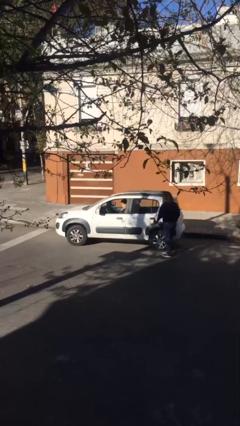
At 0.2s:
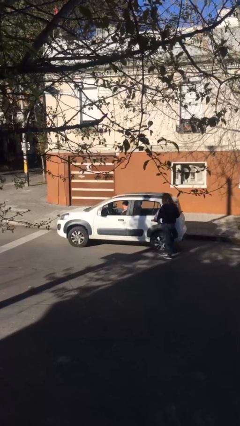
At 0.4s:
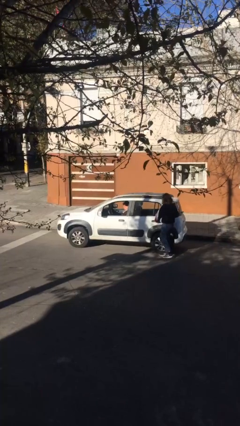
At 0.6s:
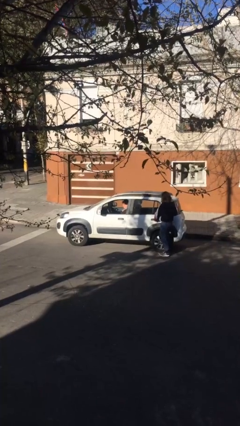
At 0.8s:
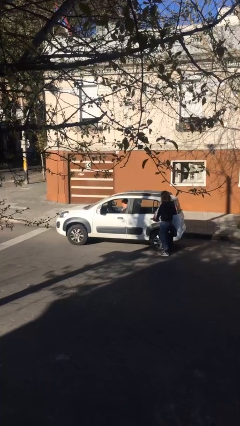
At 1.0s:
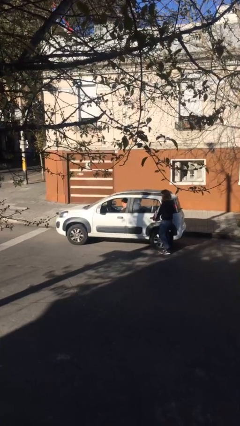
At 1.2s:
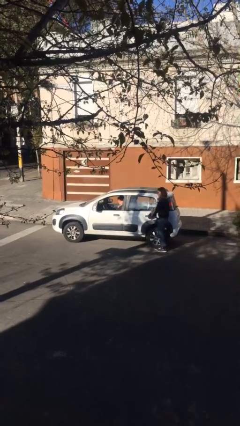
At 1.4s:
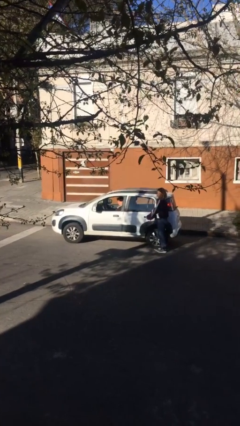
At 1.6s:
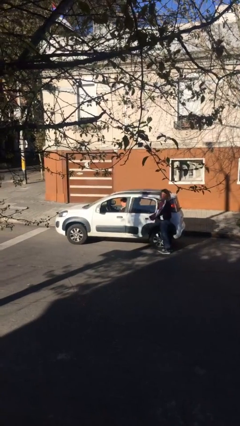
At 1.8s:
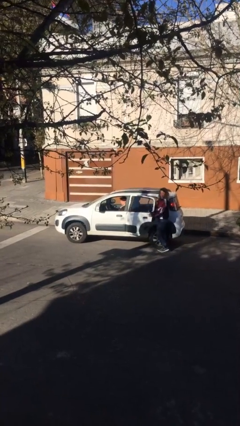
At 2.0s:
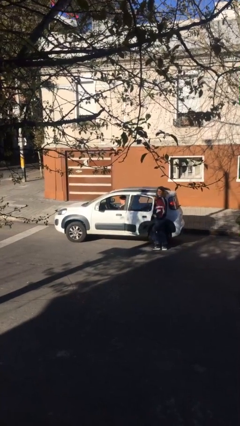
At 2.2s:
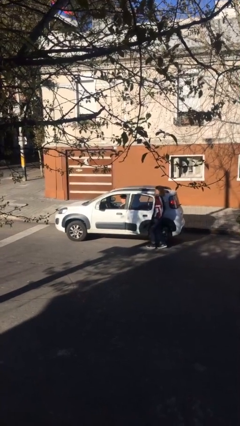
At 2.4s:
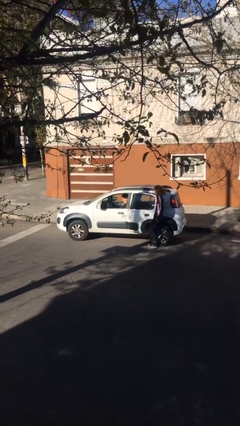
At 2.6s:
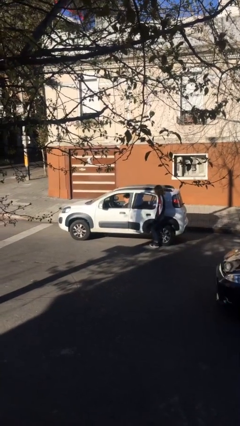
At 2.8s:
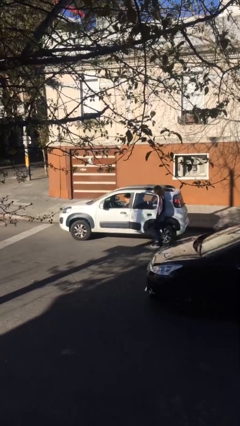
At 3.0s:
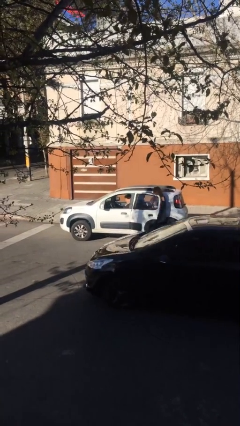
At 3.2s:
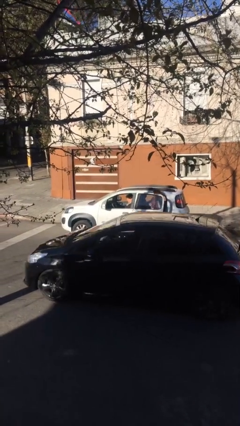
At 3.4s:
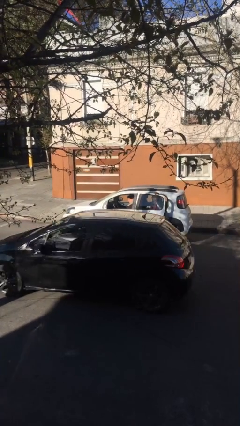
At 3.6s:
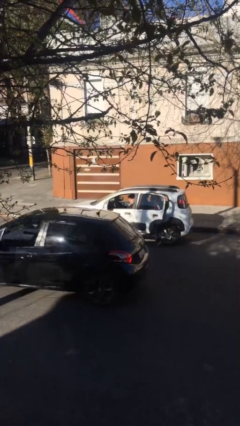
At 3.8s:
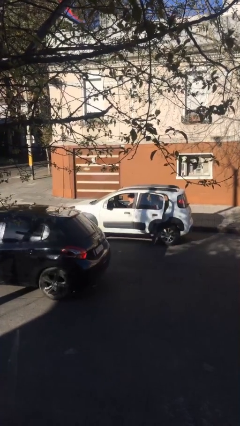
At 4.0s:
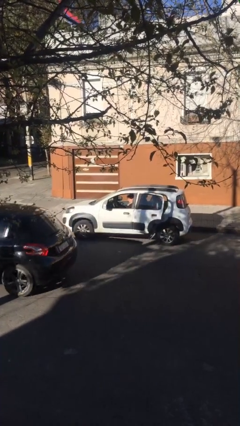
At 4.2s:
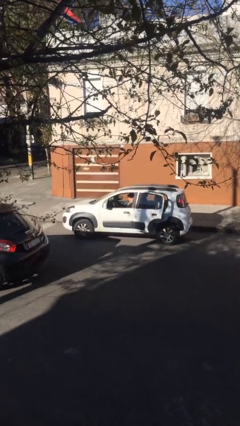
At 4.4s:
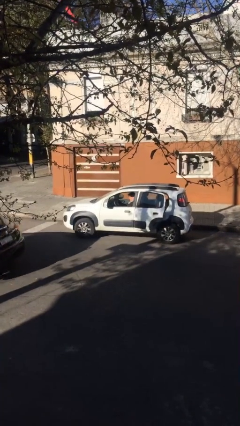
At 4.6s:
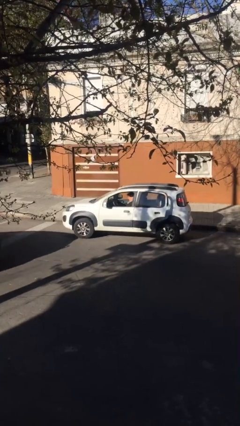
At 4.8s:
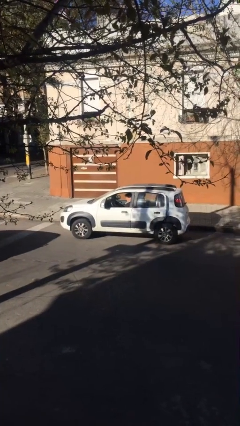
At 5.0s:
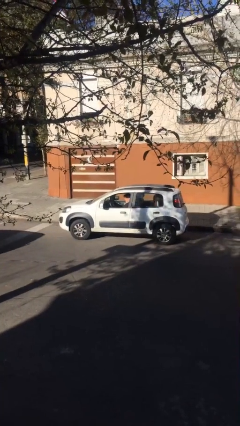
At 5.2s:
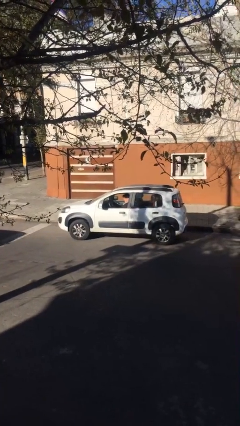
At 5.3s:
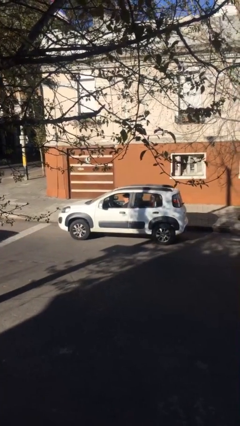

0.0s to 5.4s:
car picks up person

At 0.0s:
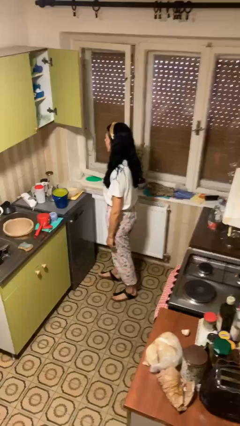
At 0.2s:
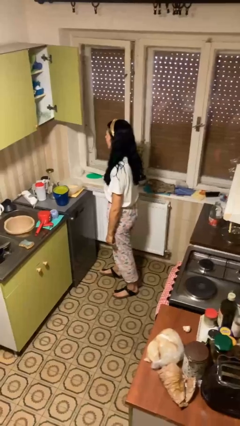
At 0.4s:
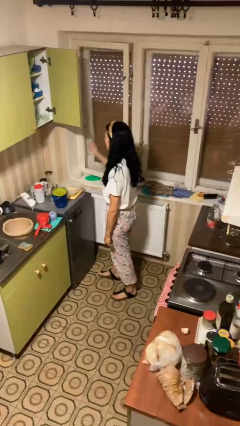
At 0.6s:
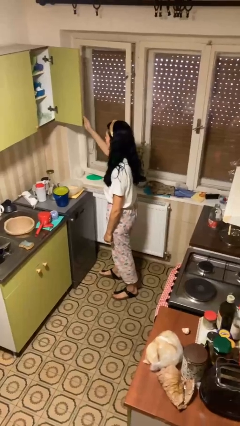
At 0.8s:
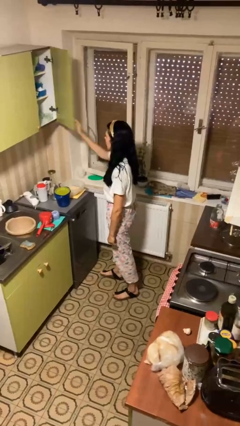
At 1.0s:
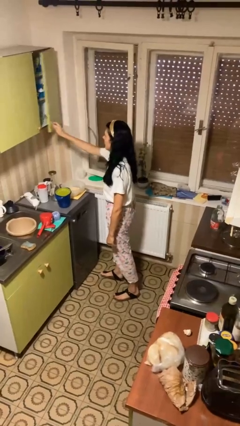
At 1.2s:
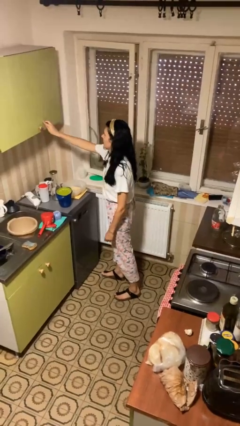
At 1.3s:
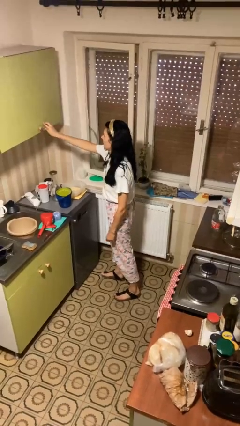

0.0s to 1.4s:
person closes cabinet

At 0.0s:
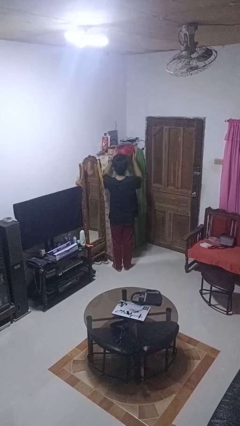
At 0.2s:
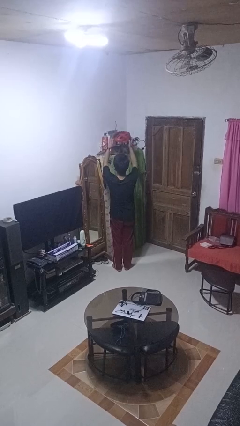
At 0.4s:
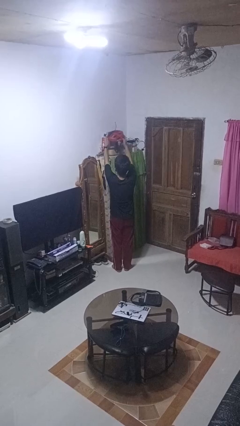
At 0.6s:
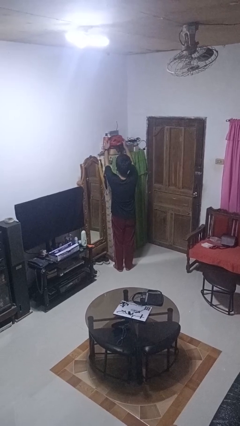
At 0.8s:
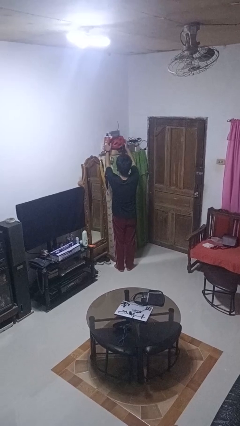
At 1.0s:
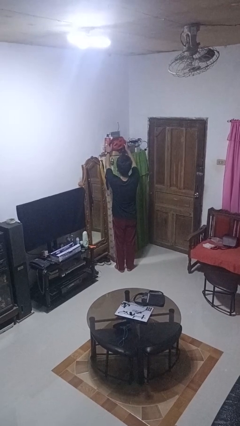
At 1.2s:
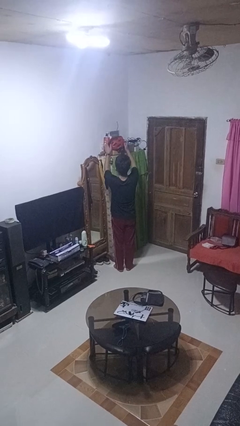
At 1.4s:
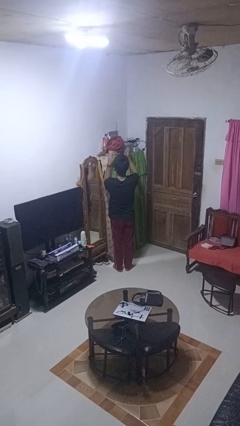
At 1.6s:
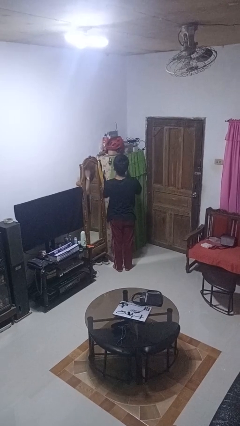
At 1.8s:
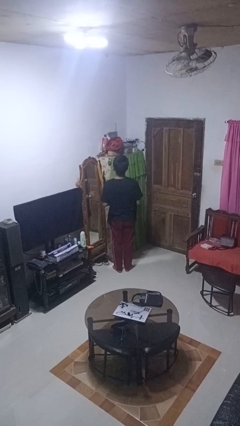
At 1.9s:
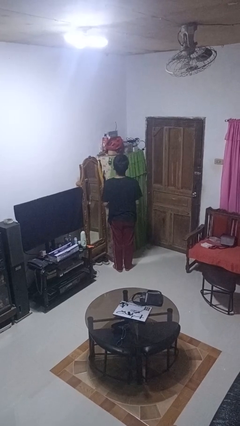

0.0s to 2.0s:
person puts down object on shelf

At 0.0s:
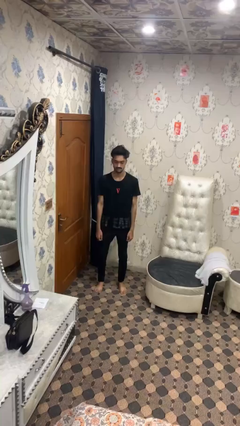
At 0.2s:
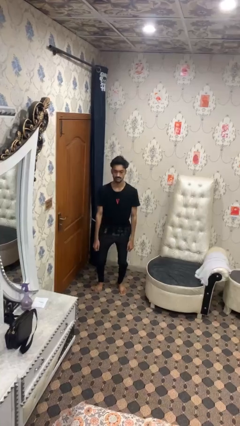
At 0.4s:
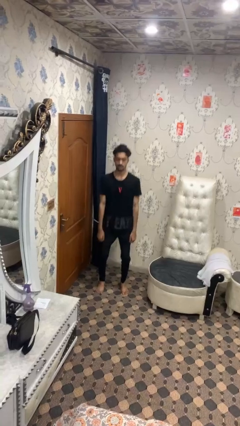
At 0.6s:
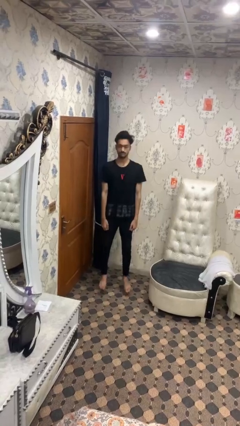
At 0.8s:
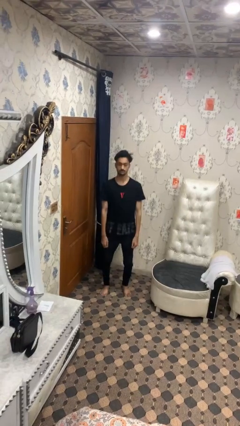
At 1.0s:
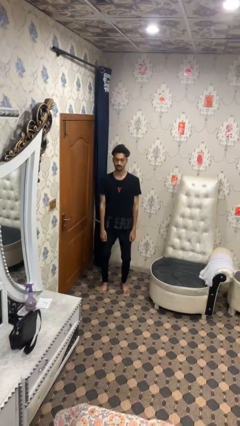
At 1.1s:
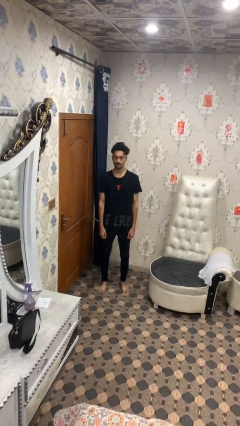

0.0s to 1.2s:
person jumps

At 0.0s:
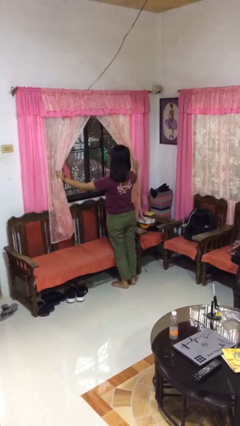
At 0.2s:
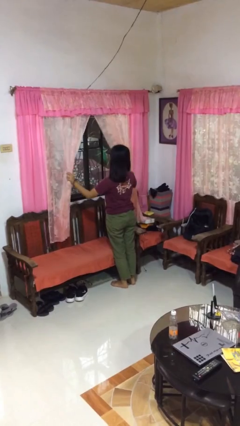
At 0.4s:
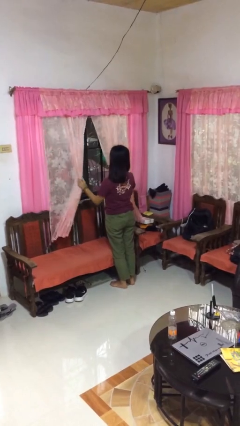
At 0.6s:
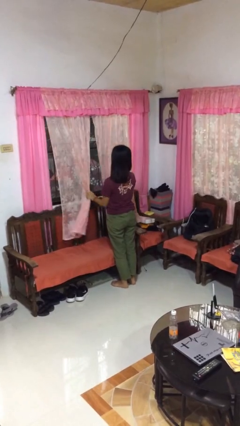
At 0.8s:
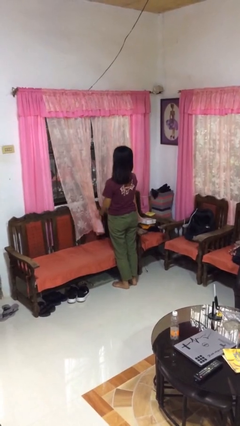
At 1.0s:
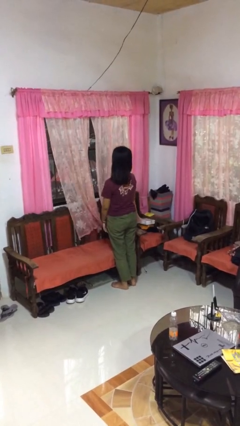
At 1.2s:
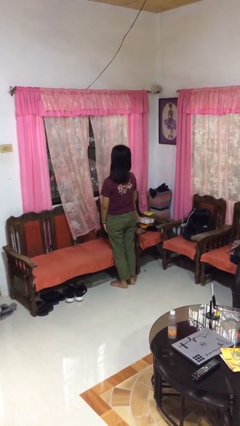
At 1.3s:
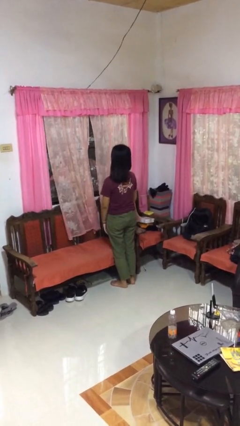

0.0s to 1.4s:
person closes curtains

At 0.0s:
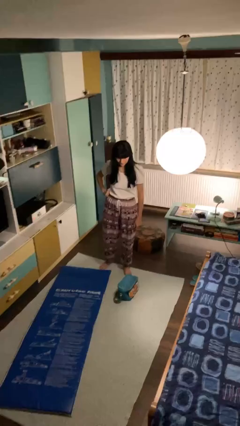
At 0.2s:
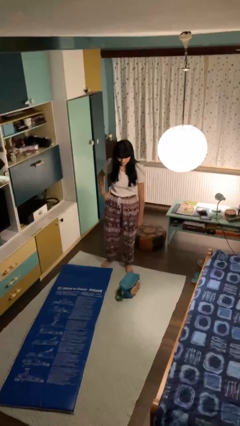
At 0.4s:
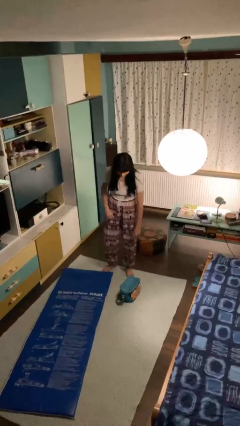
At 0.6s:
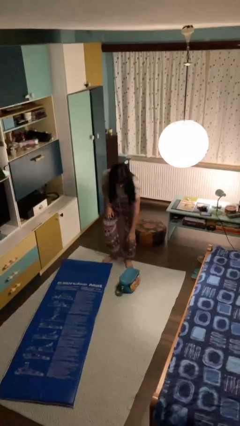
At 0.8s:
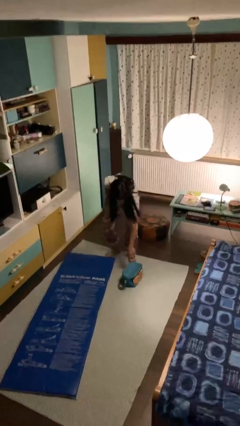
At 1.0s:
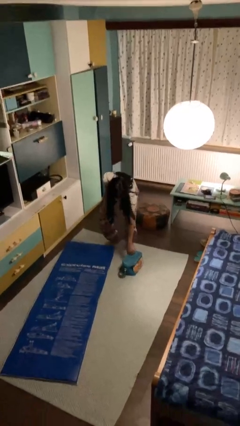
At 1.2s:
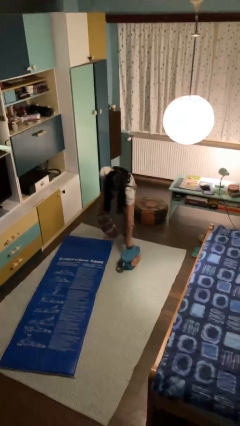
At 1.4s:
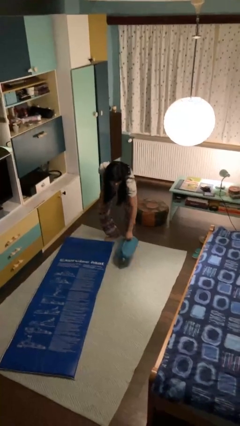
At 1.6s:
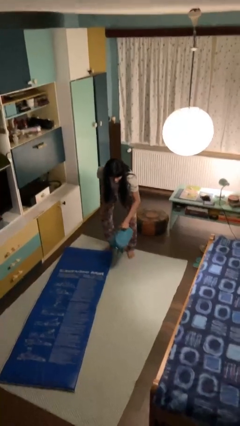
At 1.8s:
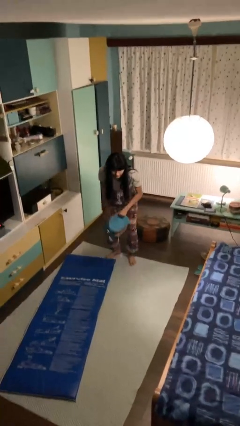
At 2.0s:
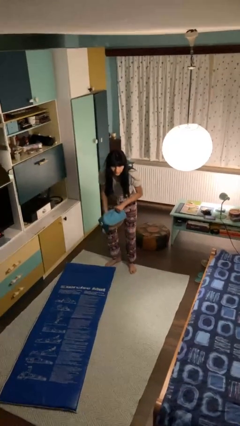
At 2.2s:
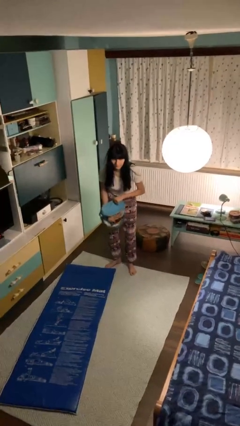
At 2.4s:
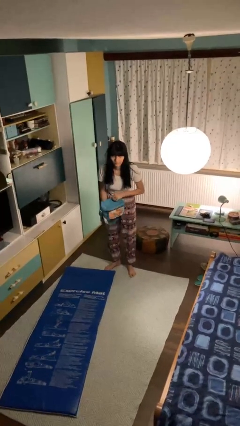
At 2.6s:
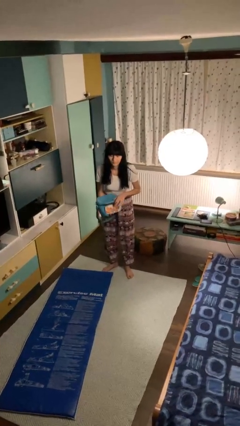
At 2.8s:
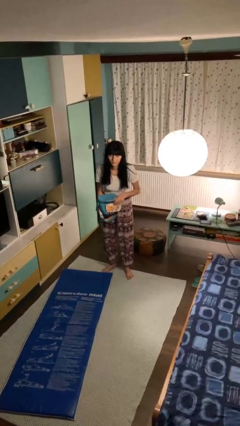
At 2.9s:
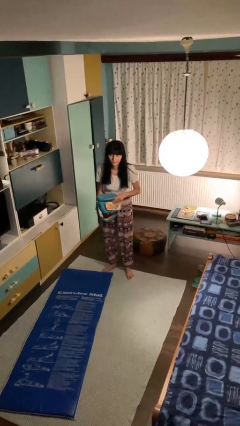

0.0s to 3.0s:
person picks up object from floor

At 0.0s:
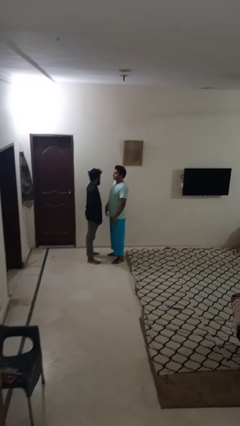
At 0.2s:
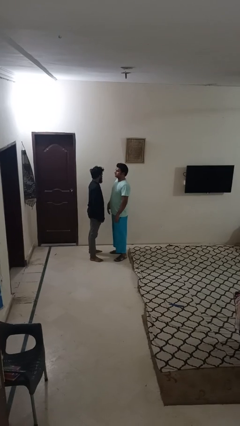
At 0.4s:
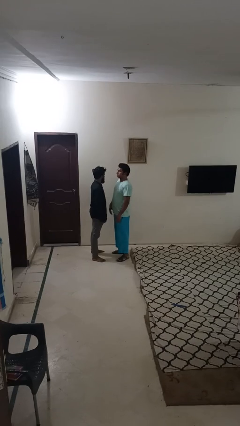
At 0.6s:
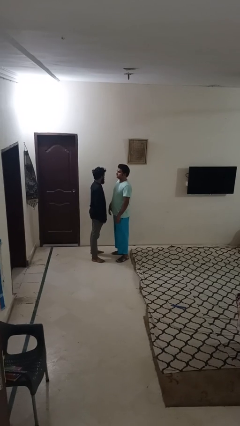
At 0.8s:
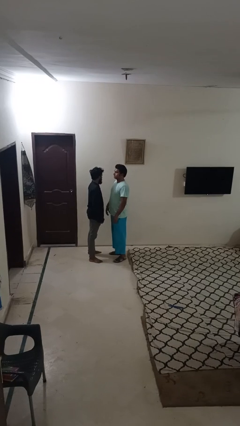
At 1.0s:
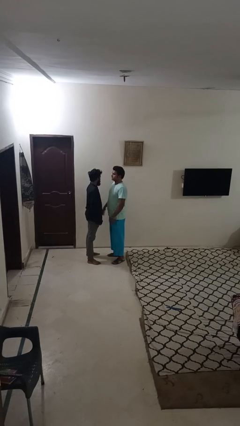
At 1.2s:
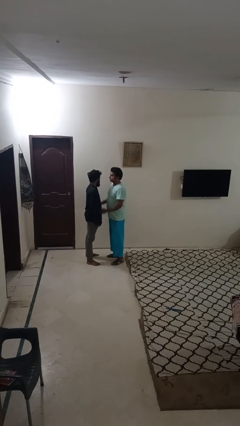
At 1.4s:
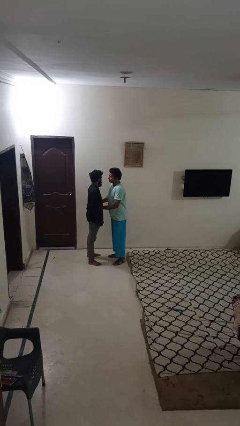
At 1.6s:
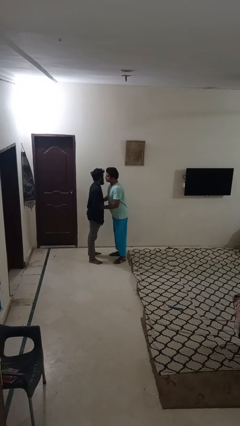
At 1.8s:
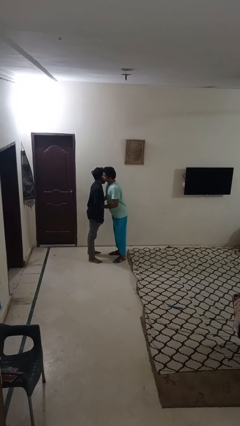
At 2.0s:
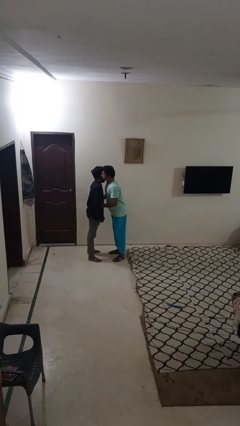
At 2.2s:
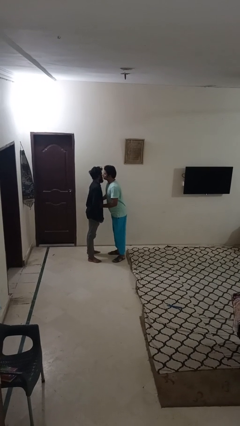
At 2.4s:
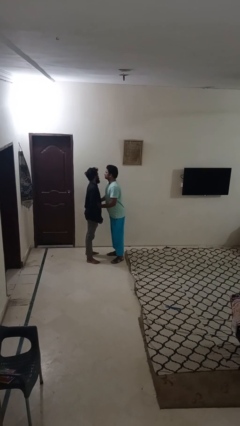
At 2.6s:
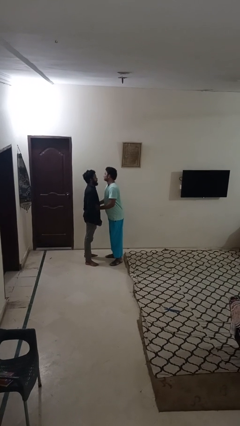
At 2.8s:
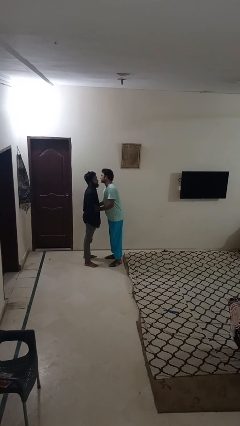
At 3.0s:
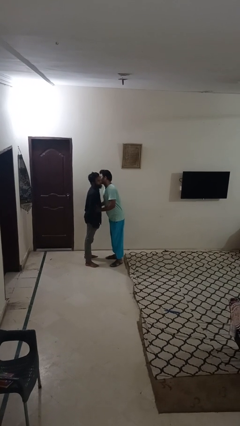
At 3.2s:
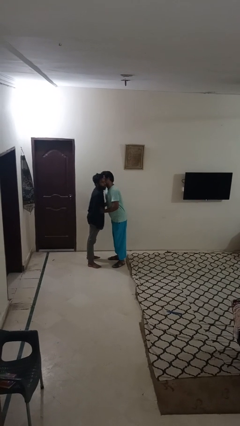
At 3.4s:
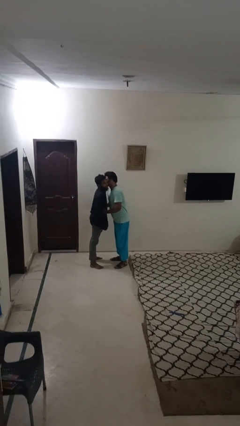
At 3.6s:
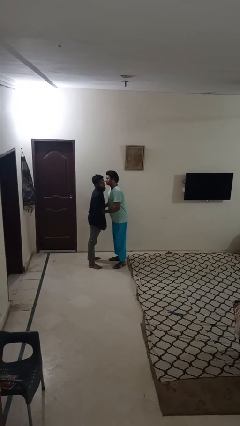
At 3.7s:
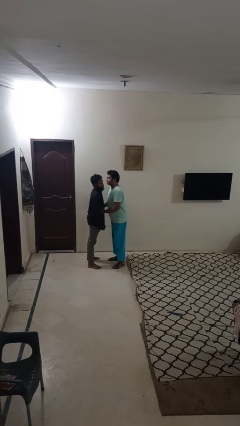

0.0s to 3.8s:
person kisses cheek of person
